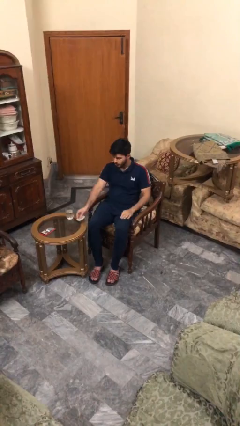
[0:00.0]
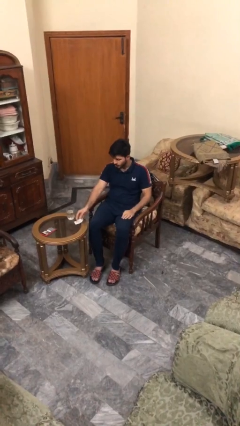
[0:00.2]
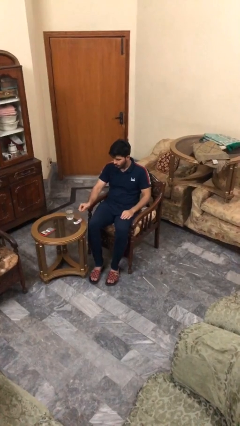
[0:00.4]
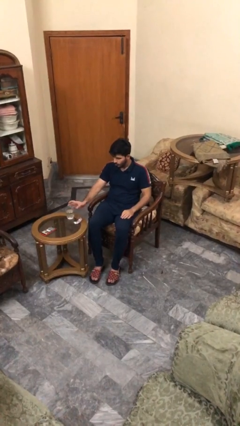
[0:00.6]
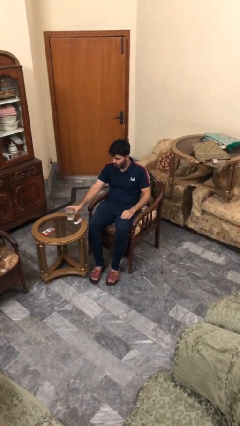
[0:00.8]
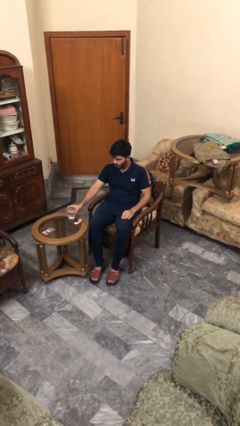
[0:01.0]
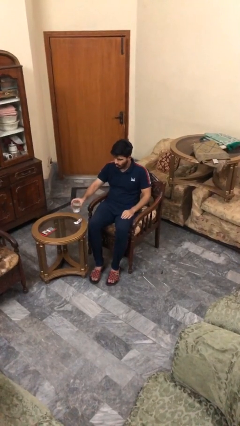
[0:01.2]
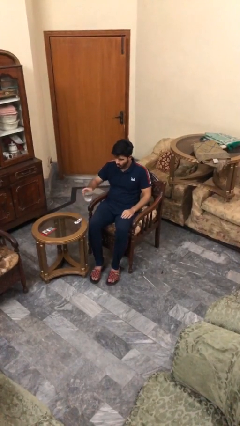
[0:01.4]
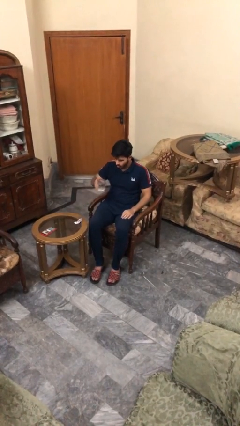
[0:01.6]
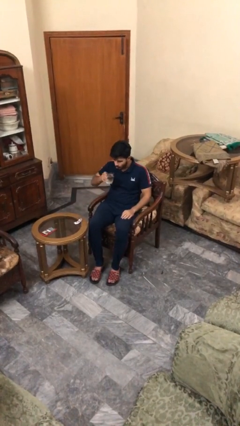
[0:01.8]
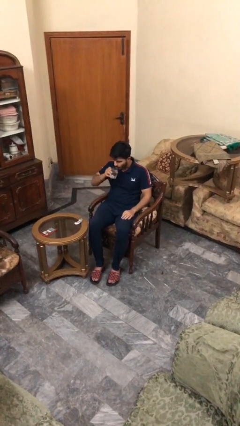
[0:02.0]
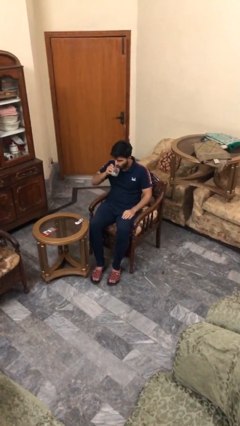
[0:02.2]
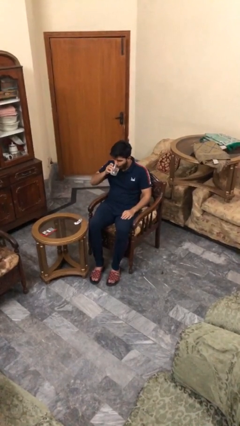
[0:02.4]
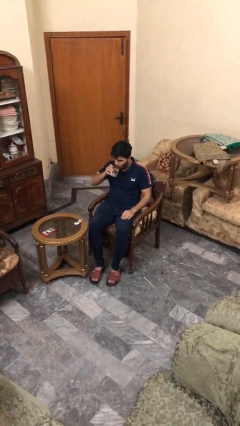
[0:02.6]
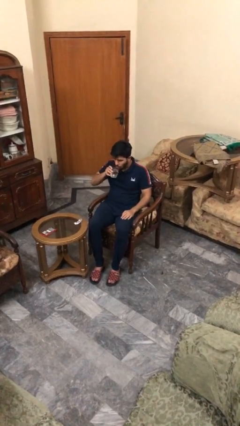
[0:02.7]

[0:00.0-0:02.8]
person drinks from cup

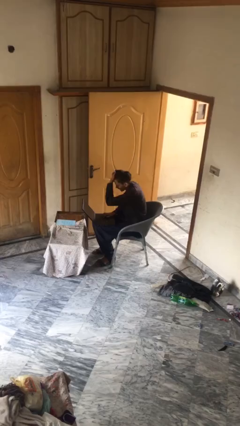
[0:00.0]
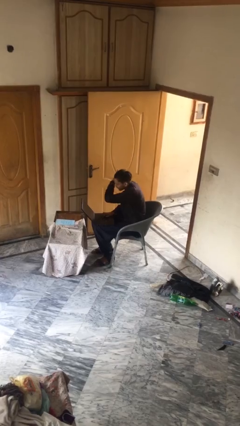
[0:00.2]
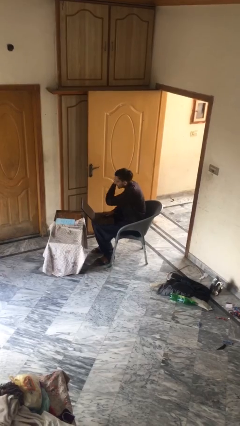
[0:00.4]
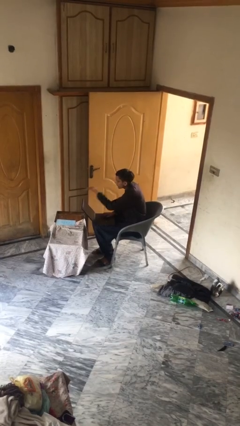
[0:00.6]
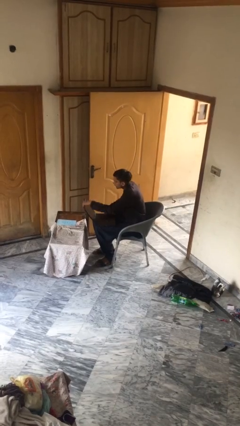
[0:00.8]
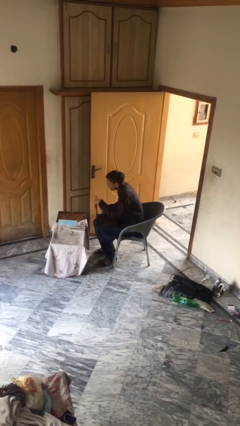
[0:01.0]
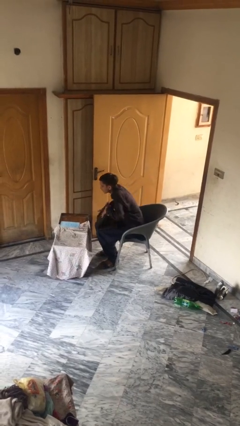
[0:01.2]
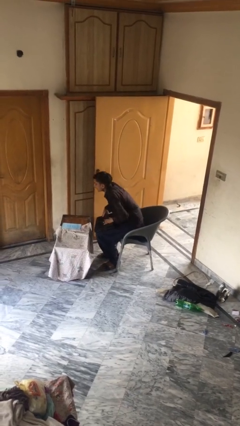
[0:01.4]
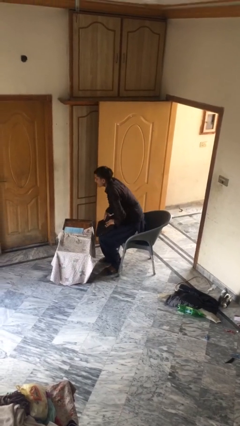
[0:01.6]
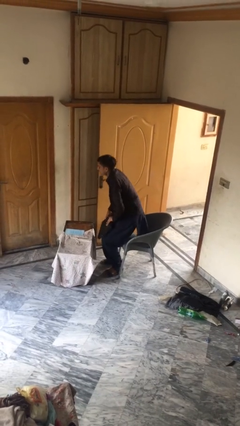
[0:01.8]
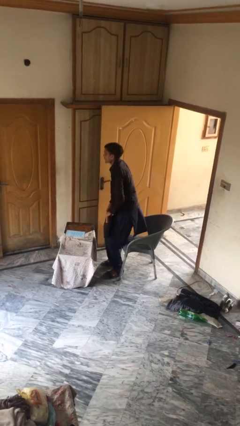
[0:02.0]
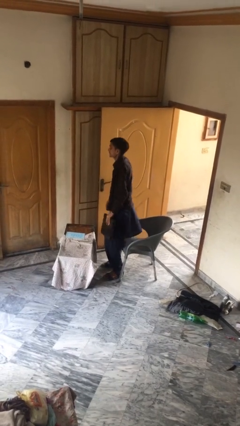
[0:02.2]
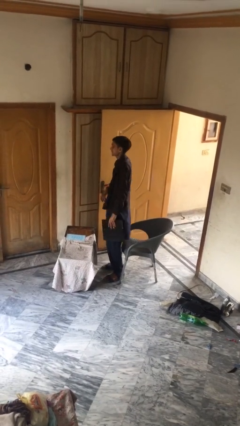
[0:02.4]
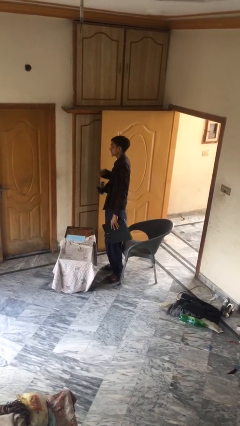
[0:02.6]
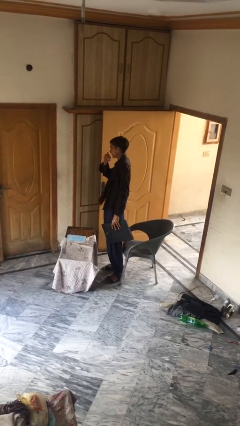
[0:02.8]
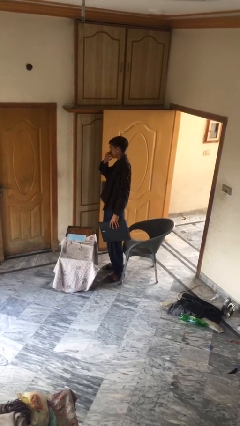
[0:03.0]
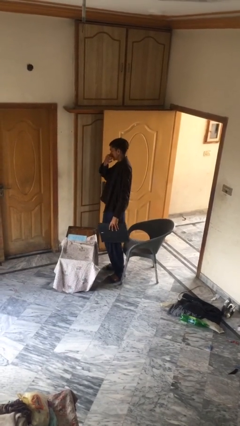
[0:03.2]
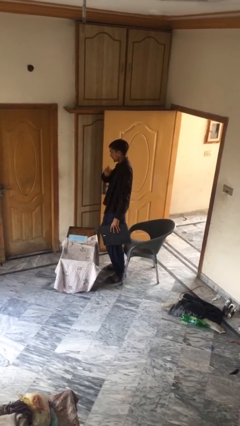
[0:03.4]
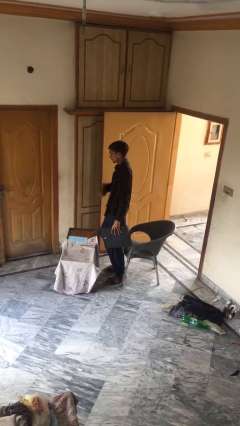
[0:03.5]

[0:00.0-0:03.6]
person stands up

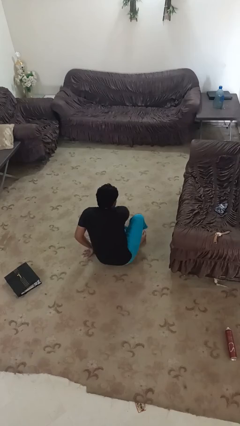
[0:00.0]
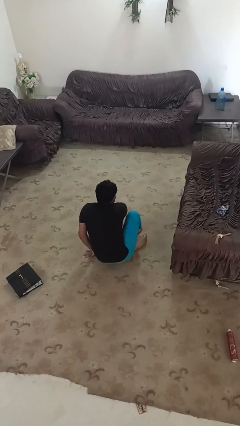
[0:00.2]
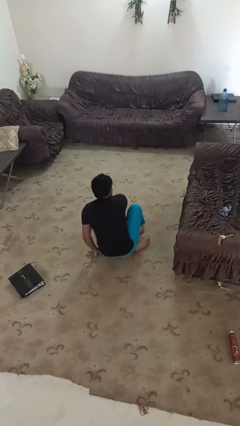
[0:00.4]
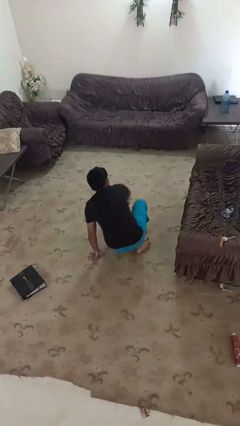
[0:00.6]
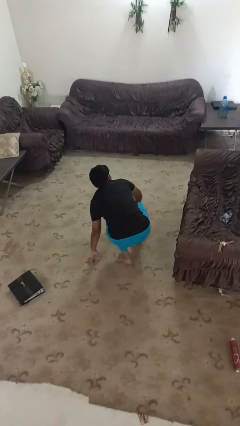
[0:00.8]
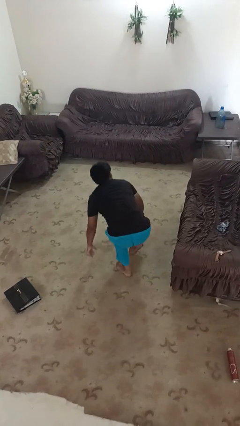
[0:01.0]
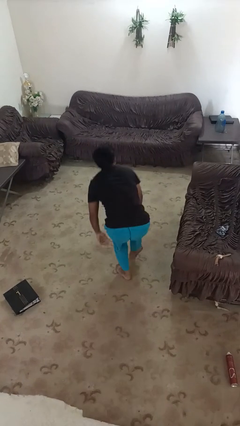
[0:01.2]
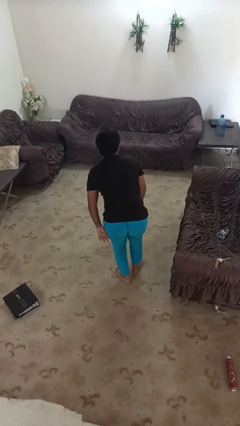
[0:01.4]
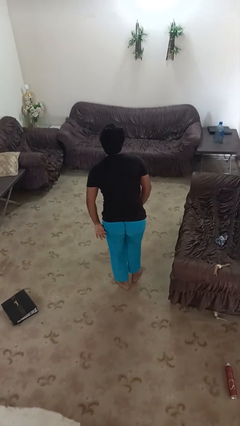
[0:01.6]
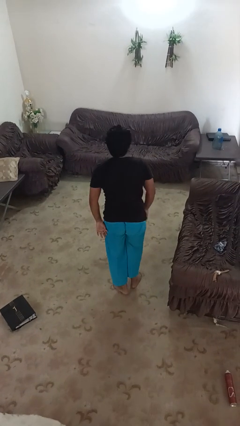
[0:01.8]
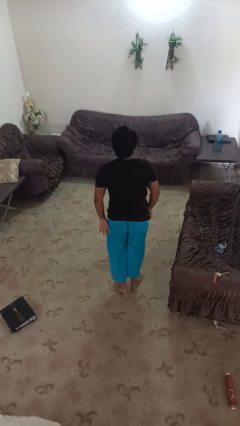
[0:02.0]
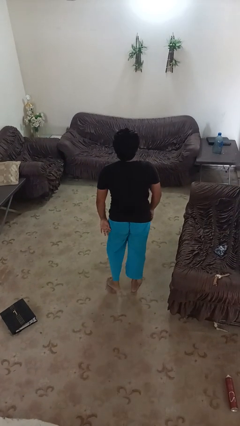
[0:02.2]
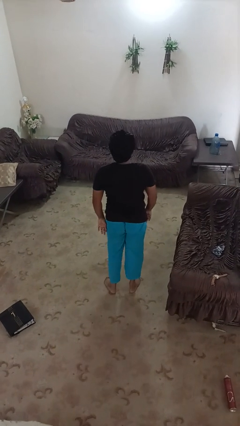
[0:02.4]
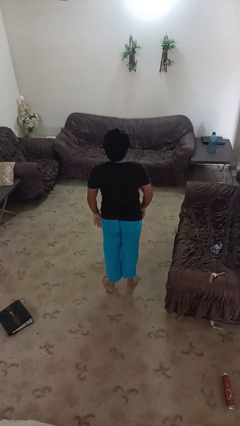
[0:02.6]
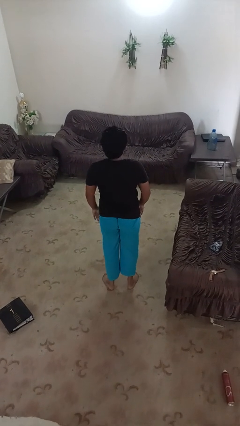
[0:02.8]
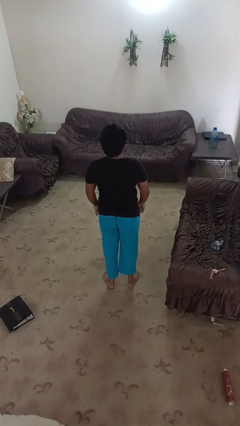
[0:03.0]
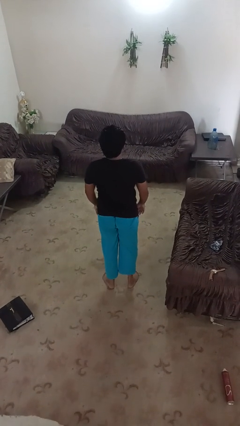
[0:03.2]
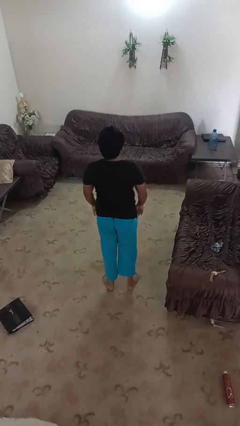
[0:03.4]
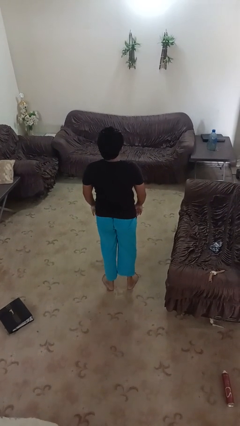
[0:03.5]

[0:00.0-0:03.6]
person stands up from floor

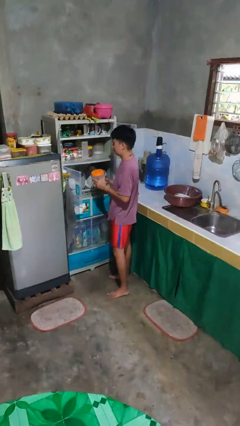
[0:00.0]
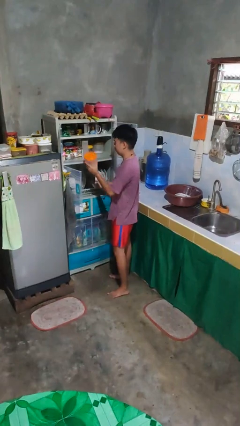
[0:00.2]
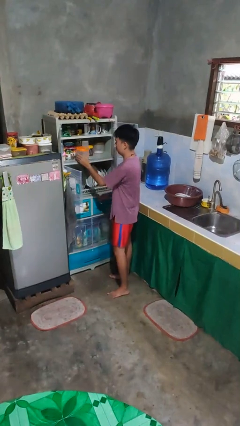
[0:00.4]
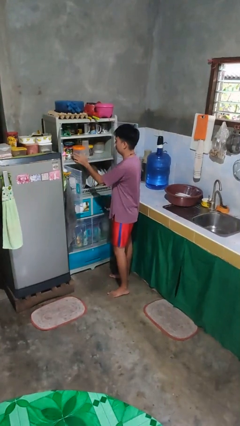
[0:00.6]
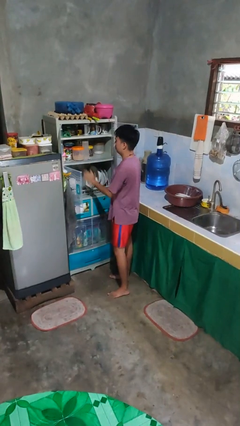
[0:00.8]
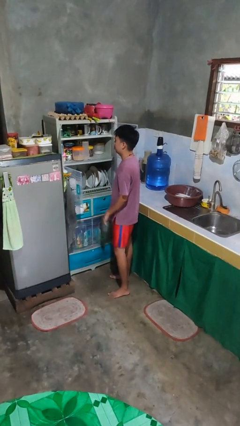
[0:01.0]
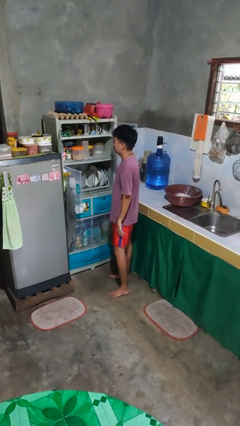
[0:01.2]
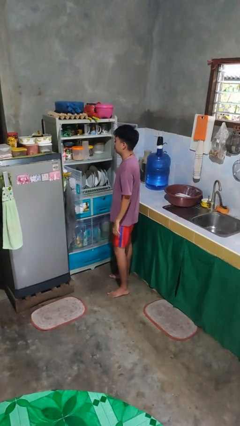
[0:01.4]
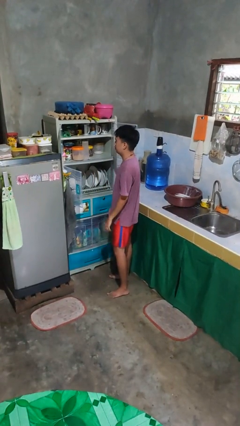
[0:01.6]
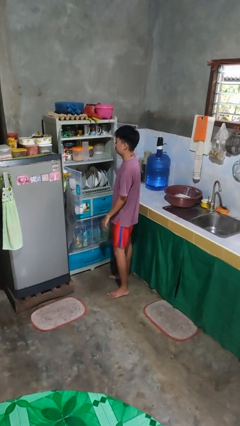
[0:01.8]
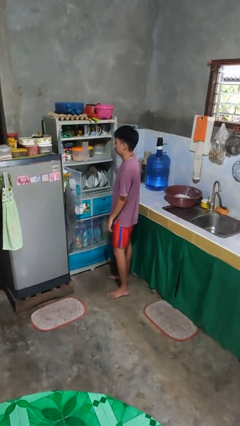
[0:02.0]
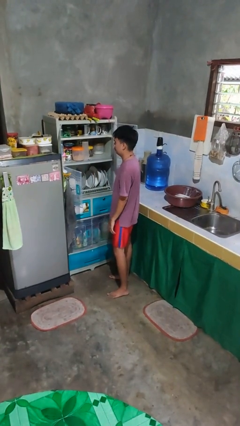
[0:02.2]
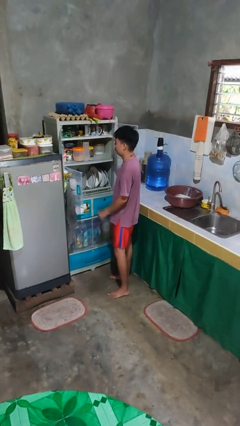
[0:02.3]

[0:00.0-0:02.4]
person puts object in cabinet

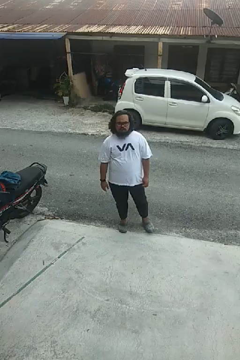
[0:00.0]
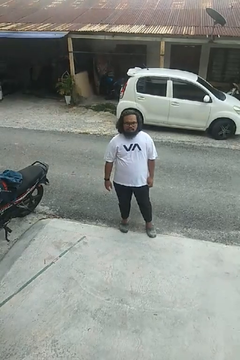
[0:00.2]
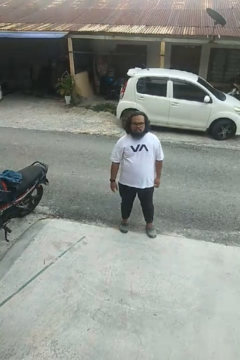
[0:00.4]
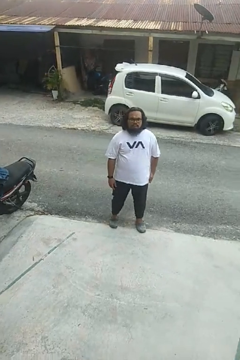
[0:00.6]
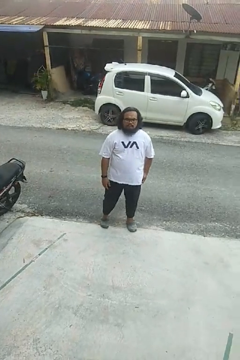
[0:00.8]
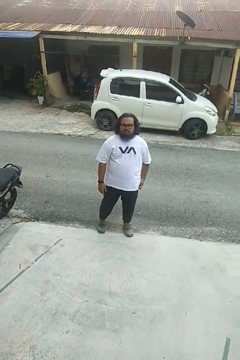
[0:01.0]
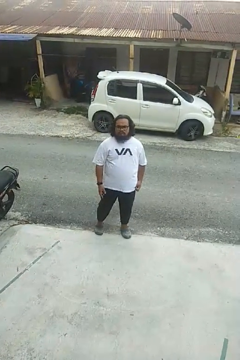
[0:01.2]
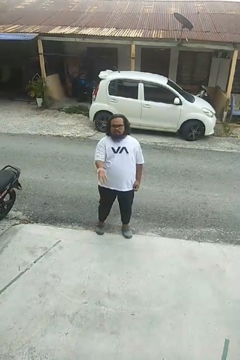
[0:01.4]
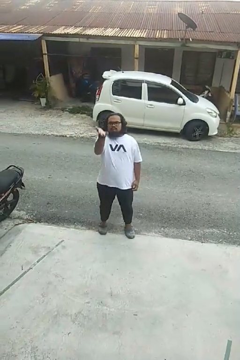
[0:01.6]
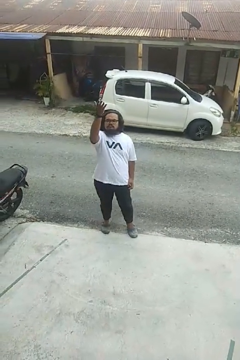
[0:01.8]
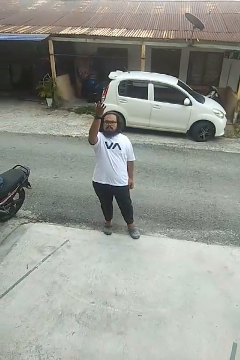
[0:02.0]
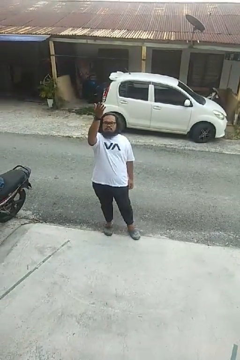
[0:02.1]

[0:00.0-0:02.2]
person gestures swipe up

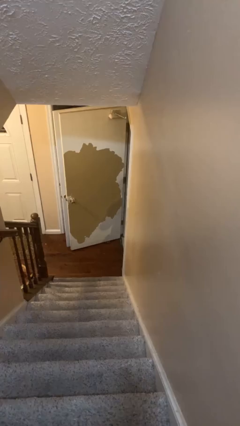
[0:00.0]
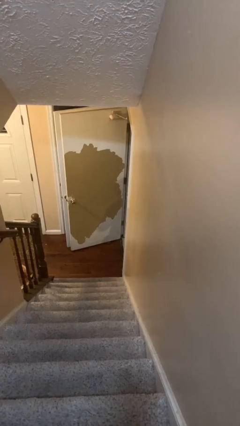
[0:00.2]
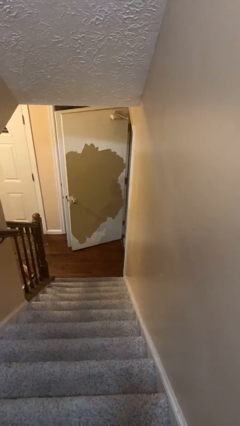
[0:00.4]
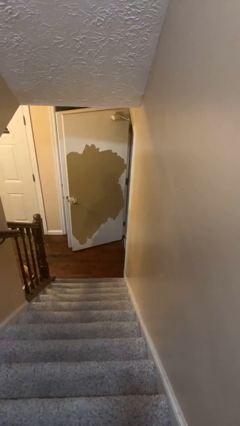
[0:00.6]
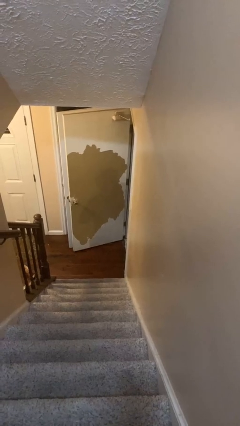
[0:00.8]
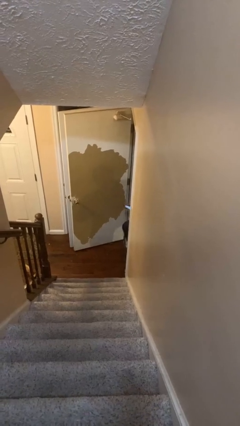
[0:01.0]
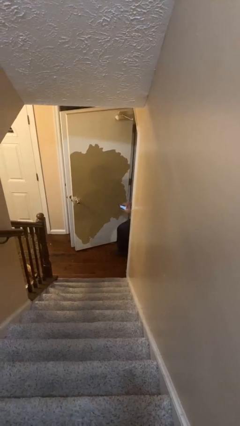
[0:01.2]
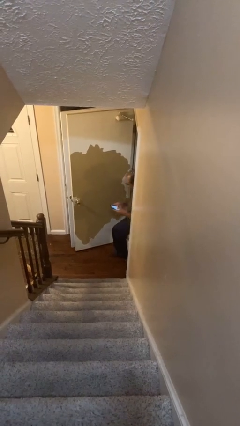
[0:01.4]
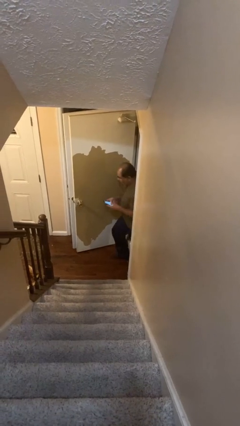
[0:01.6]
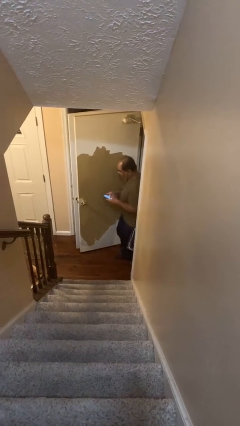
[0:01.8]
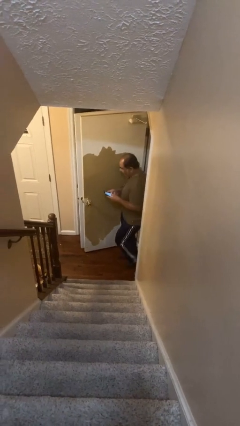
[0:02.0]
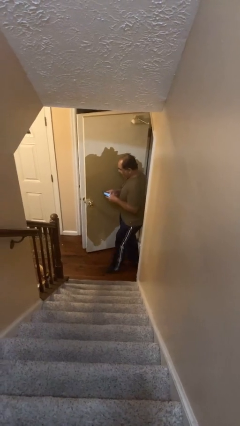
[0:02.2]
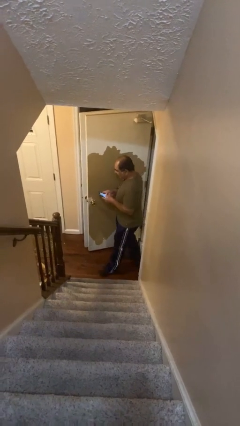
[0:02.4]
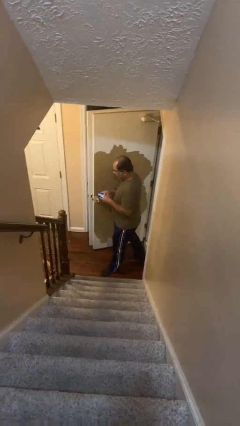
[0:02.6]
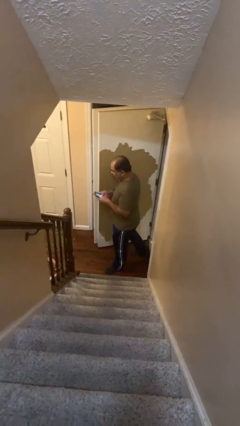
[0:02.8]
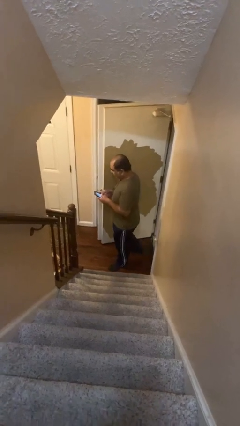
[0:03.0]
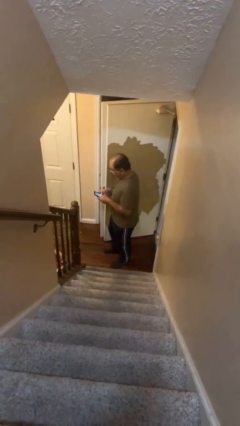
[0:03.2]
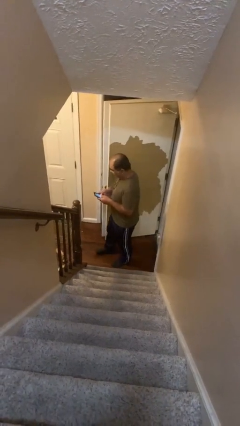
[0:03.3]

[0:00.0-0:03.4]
person enters scene through structure

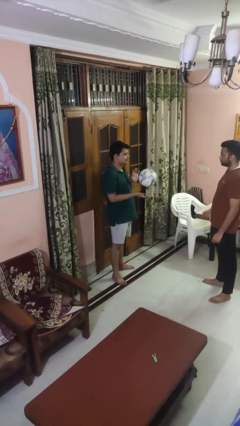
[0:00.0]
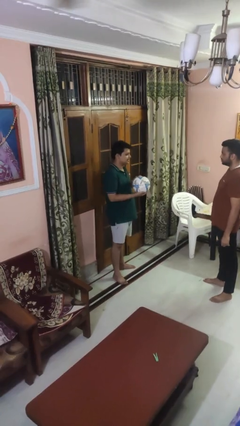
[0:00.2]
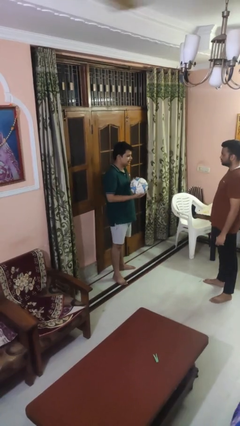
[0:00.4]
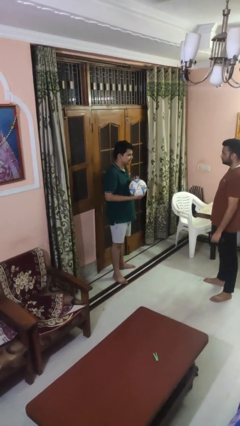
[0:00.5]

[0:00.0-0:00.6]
person catches object from person
